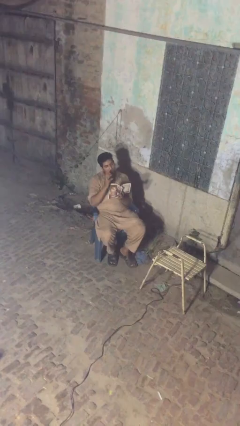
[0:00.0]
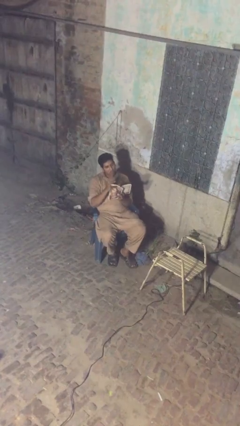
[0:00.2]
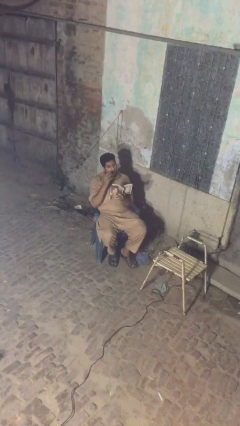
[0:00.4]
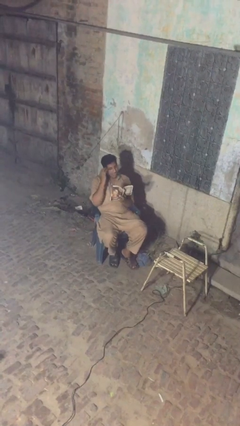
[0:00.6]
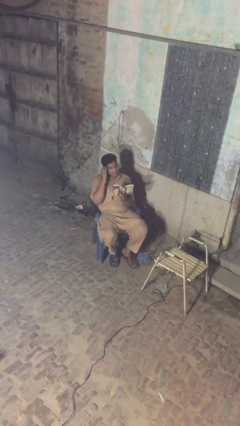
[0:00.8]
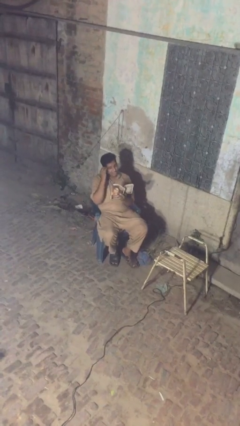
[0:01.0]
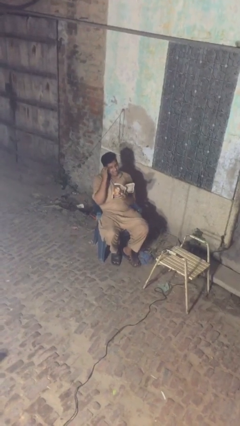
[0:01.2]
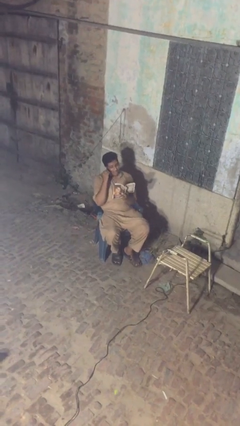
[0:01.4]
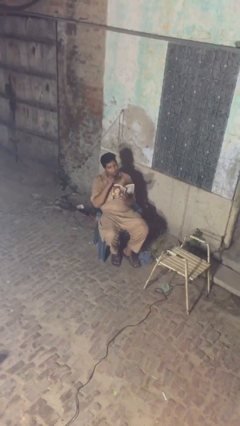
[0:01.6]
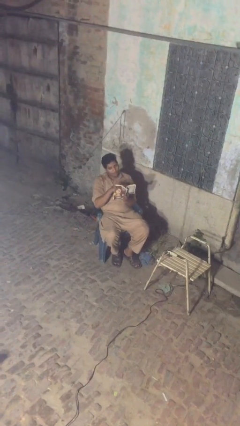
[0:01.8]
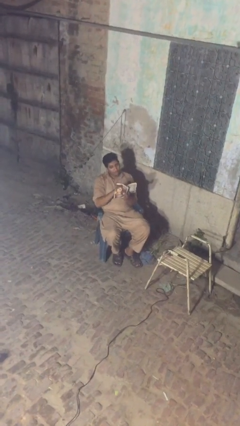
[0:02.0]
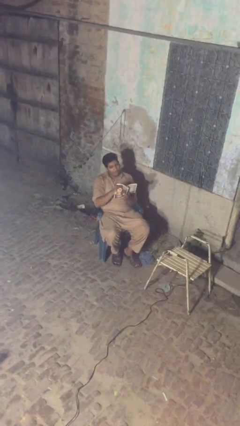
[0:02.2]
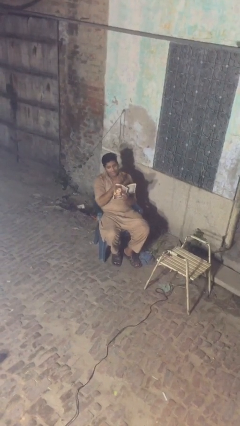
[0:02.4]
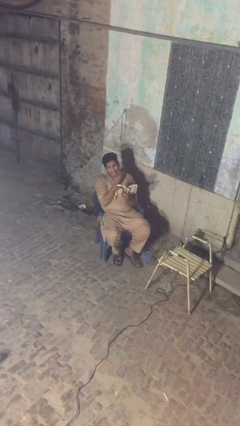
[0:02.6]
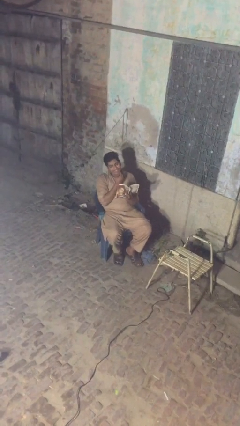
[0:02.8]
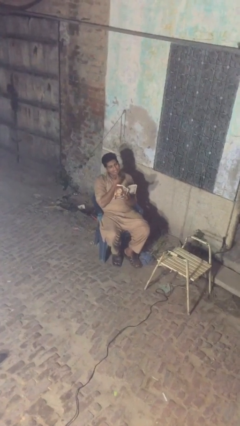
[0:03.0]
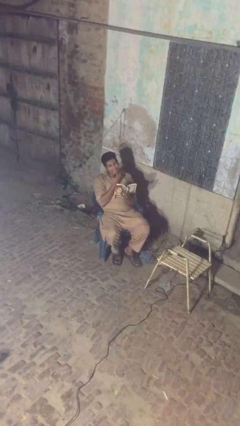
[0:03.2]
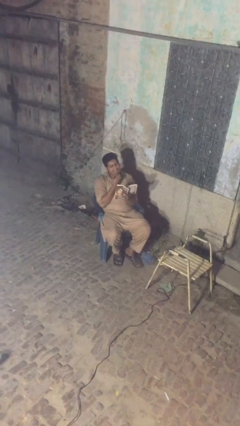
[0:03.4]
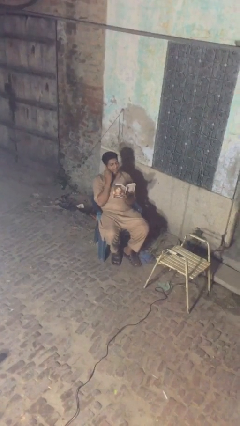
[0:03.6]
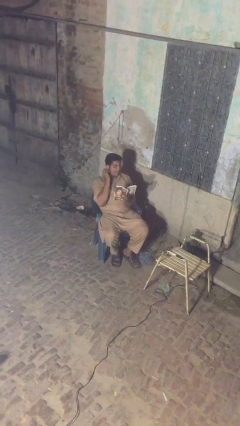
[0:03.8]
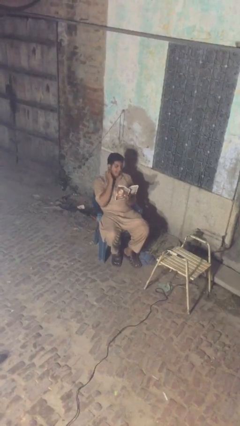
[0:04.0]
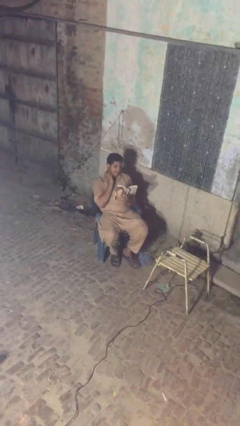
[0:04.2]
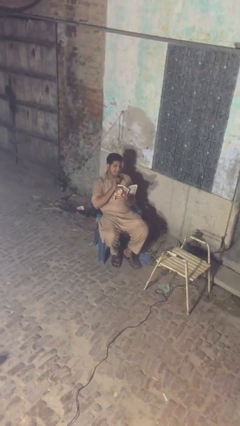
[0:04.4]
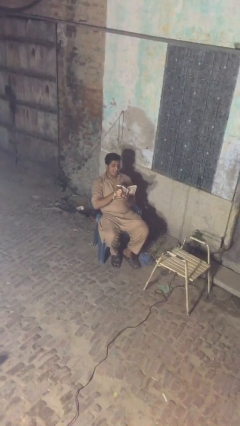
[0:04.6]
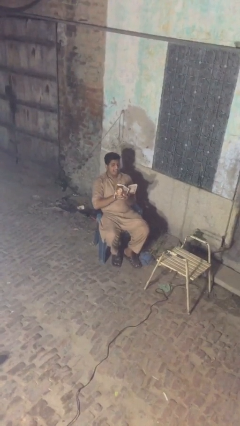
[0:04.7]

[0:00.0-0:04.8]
person reads document

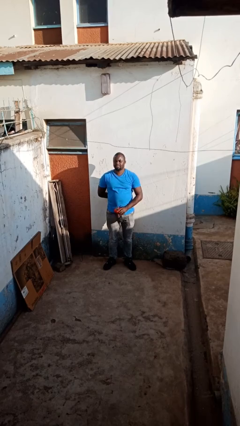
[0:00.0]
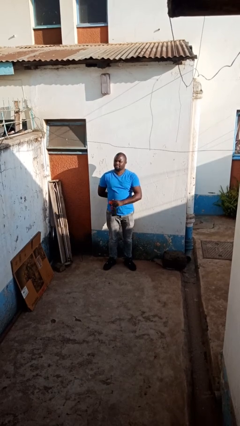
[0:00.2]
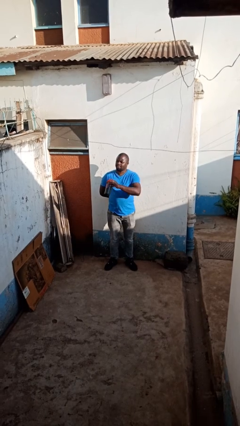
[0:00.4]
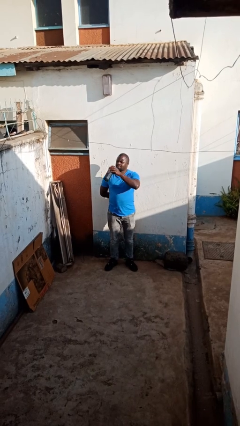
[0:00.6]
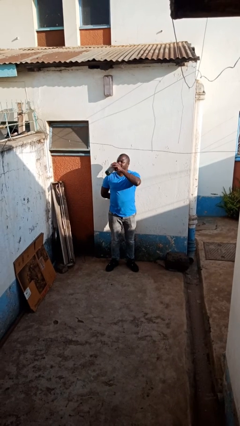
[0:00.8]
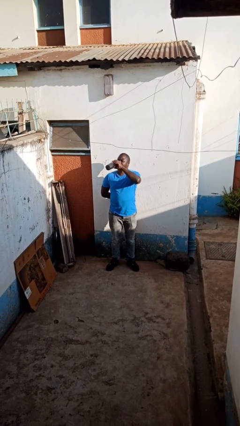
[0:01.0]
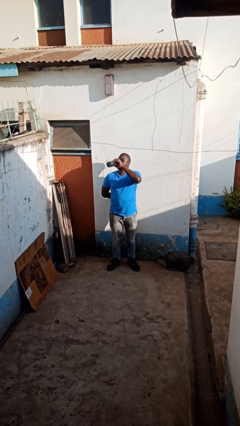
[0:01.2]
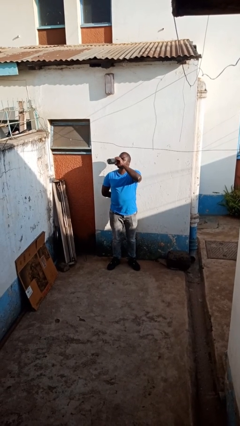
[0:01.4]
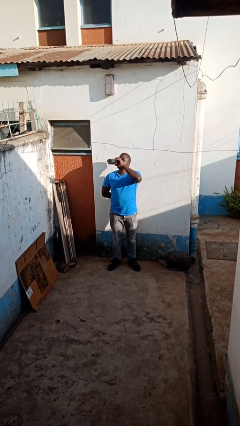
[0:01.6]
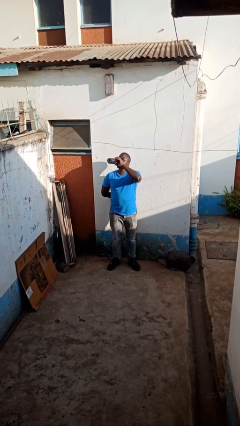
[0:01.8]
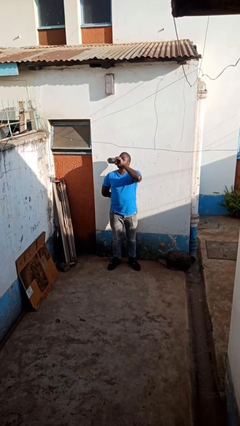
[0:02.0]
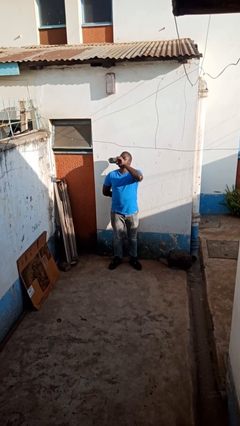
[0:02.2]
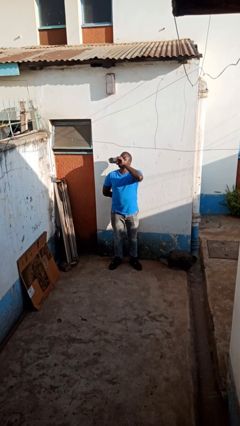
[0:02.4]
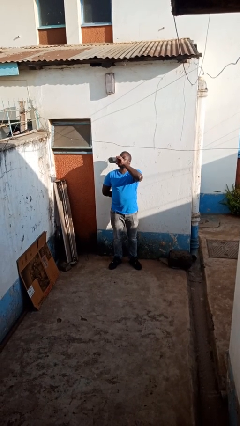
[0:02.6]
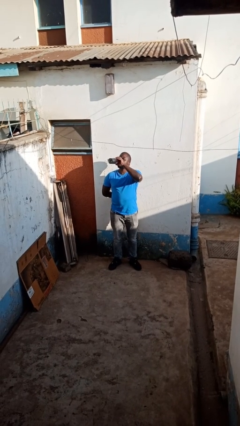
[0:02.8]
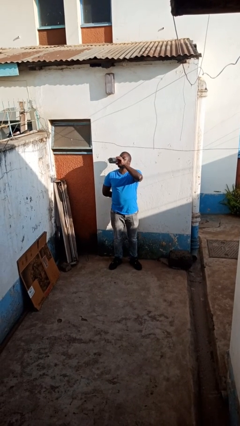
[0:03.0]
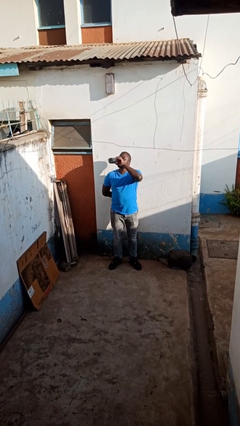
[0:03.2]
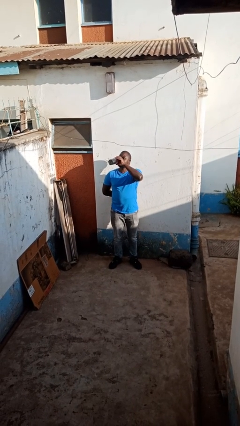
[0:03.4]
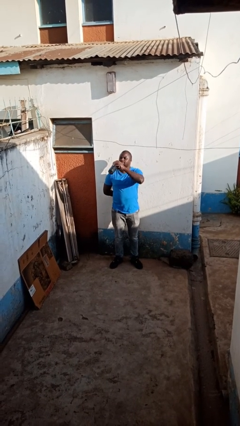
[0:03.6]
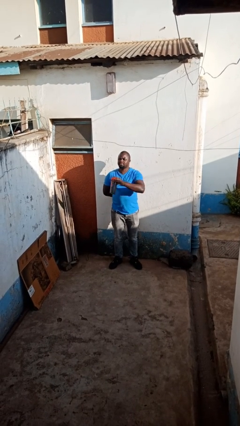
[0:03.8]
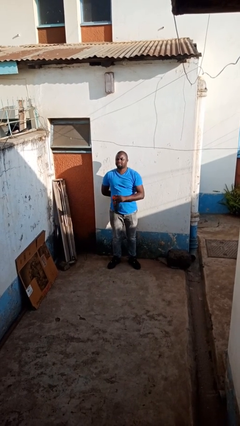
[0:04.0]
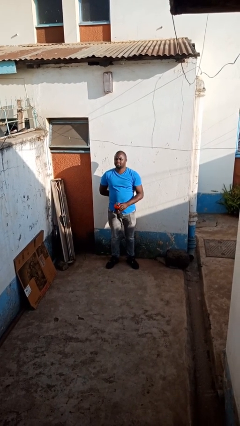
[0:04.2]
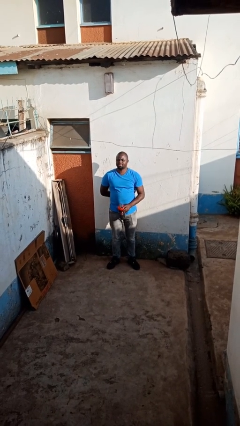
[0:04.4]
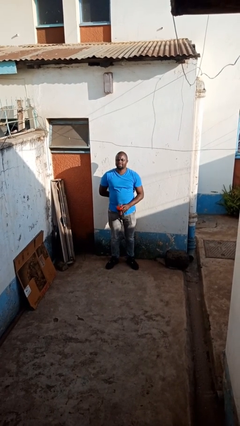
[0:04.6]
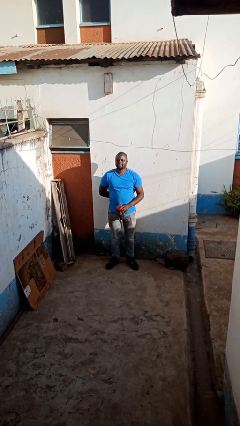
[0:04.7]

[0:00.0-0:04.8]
person drinks from bottle

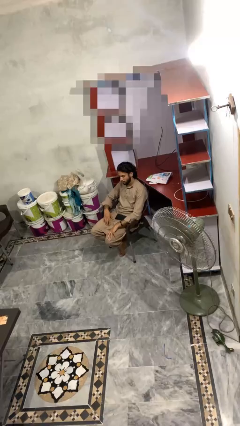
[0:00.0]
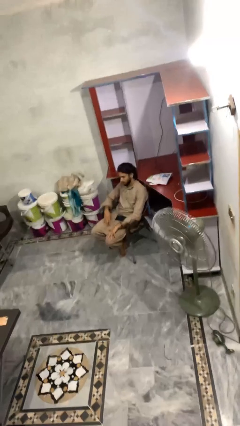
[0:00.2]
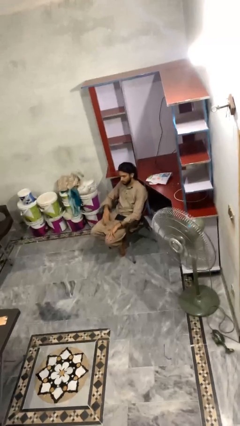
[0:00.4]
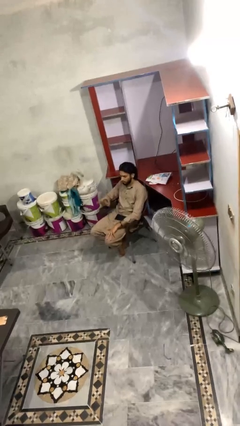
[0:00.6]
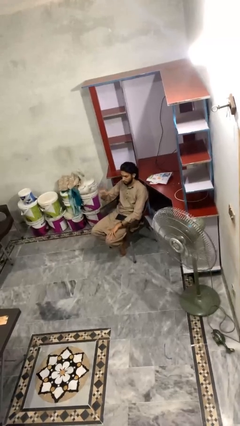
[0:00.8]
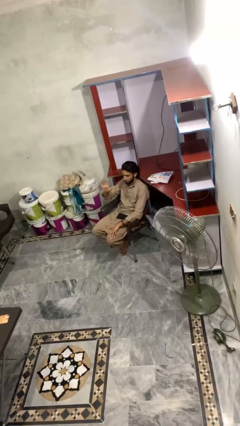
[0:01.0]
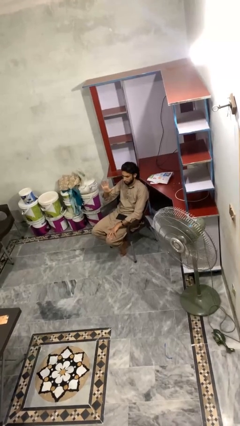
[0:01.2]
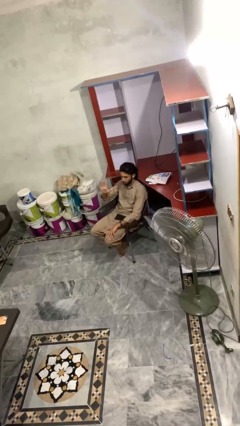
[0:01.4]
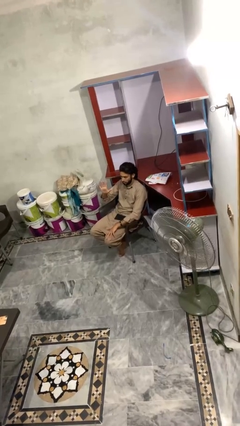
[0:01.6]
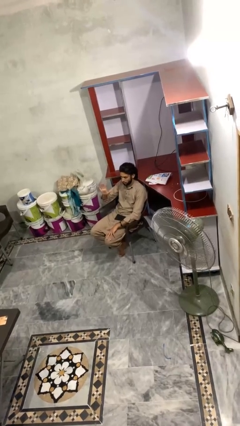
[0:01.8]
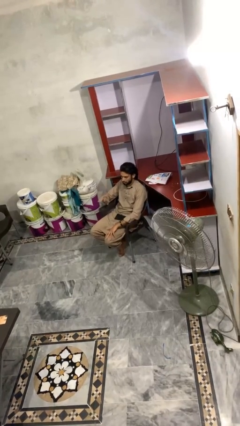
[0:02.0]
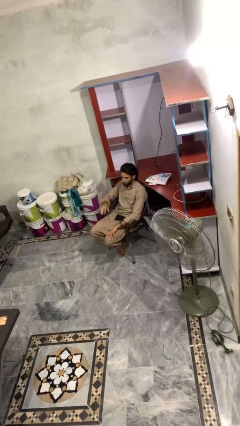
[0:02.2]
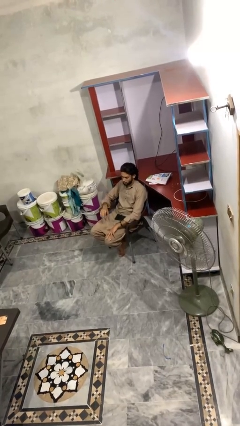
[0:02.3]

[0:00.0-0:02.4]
person gestures number five

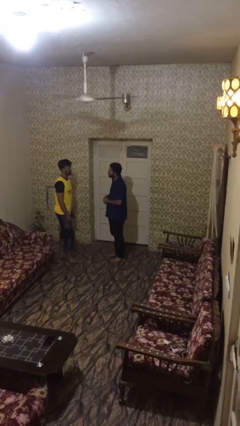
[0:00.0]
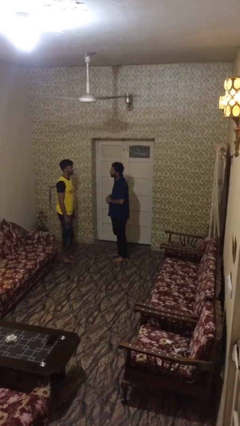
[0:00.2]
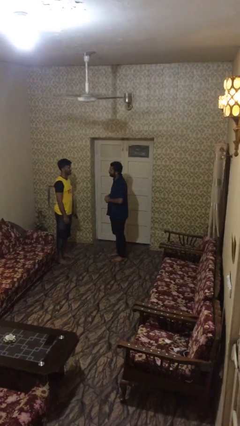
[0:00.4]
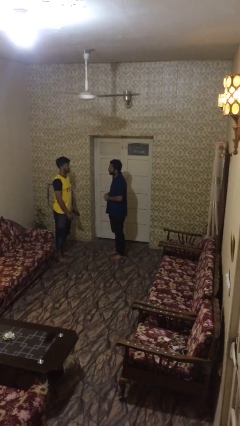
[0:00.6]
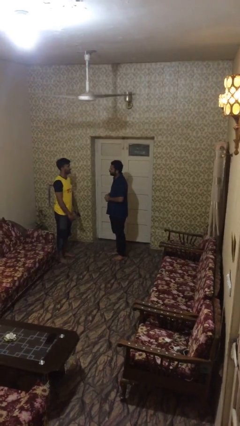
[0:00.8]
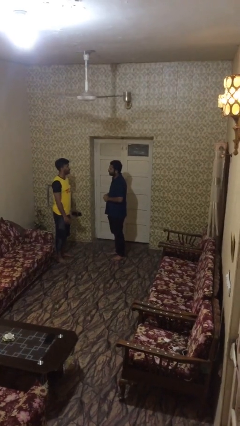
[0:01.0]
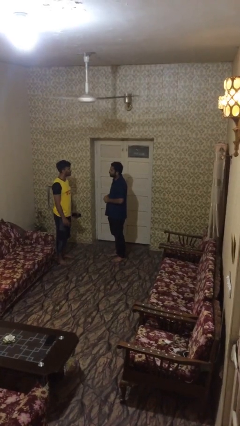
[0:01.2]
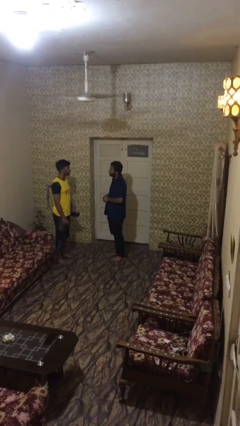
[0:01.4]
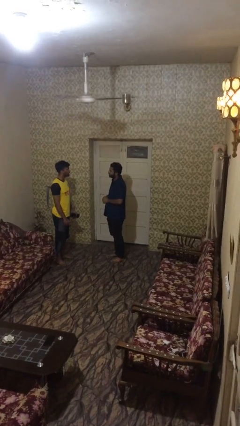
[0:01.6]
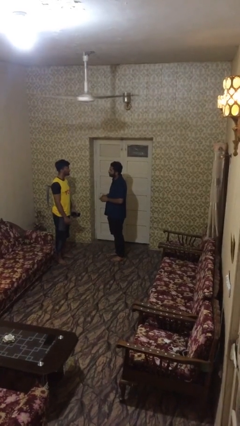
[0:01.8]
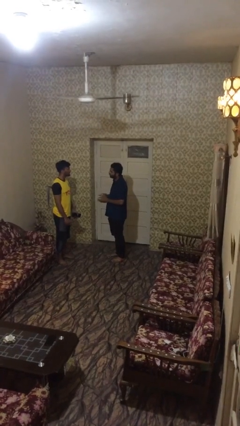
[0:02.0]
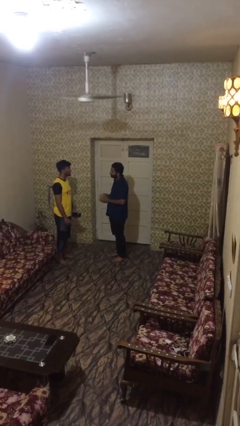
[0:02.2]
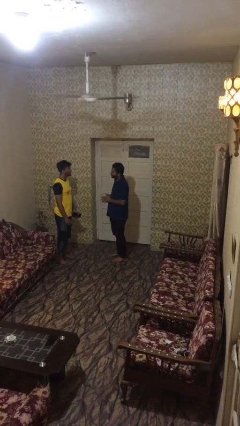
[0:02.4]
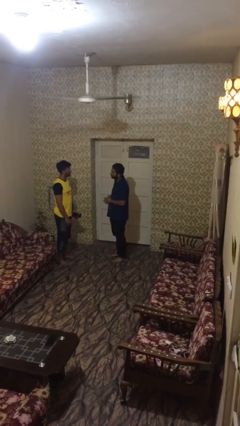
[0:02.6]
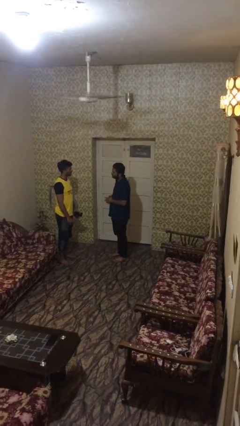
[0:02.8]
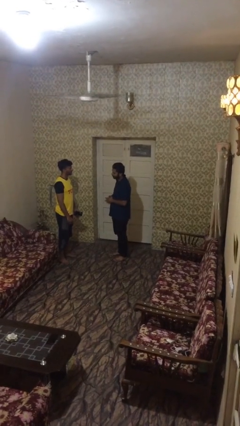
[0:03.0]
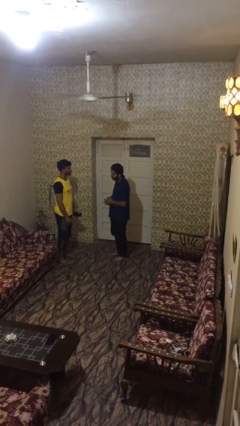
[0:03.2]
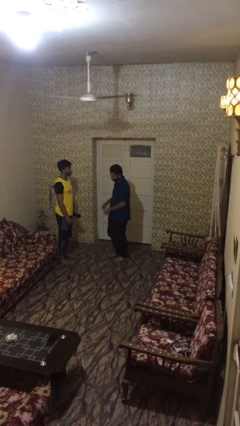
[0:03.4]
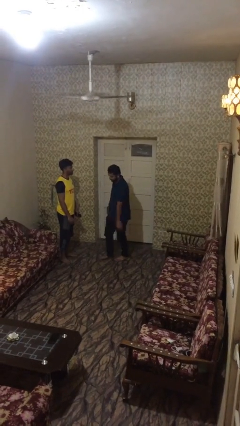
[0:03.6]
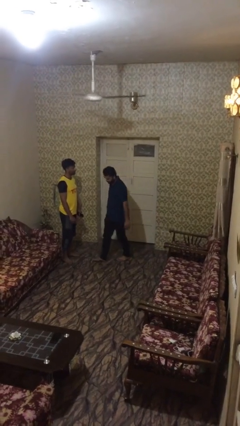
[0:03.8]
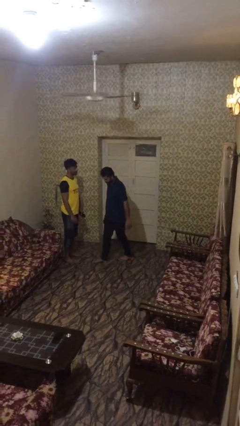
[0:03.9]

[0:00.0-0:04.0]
person talks to person

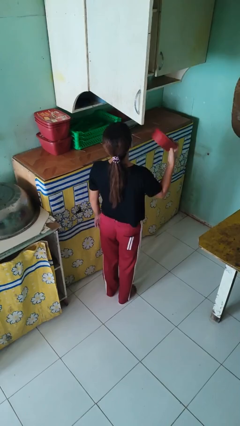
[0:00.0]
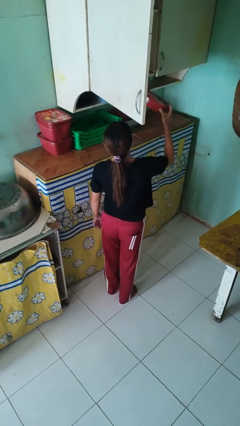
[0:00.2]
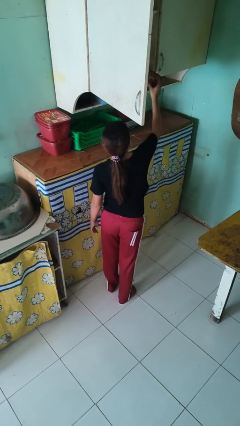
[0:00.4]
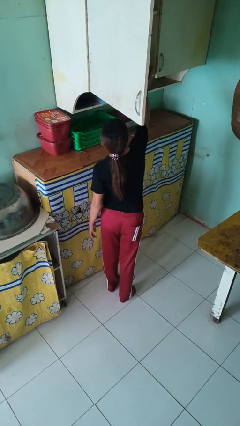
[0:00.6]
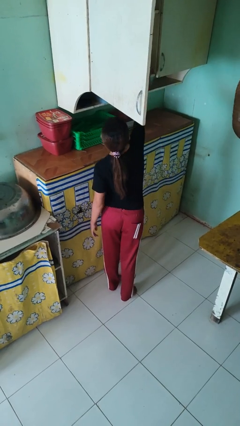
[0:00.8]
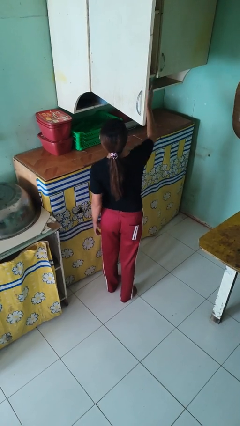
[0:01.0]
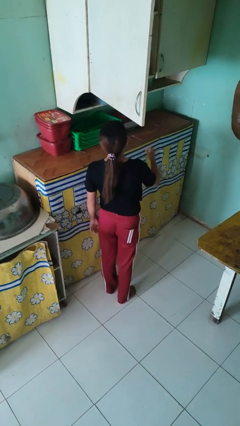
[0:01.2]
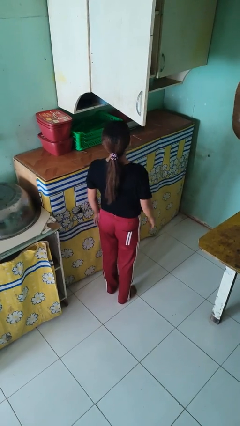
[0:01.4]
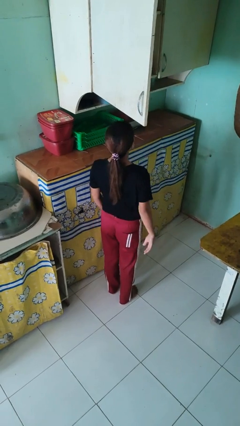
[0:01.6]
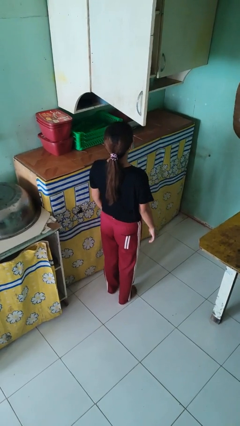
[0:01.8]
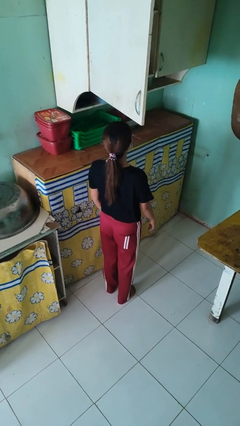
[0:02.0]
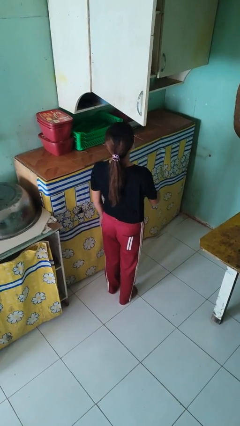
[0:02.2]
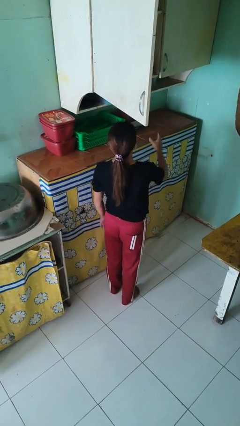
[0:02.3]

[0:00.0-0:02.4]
person puts object in cabinet
